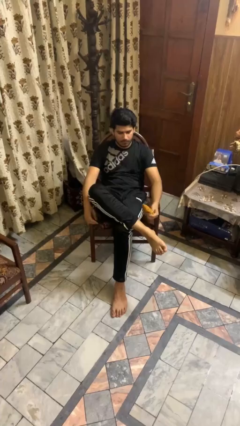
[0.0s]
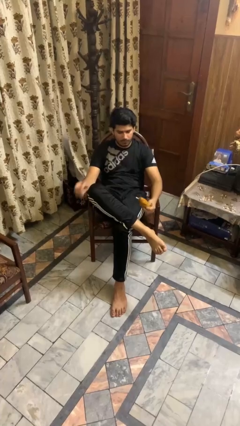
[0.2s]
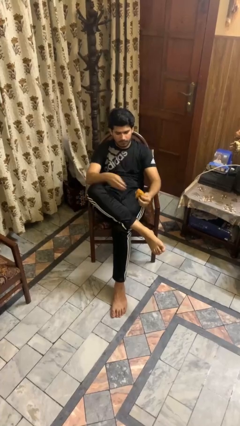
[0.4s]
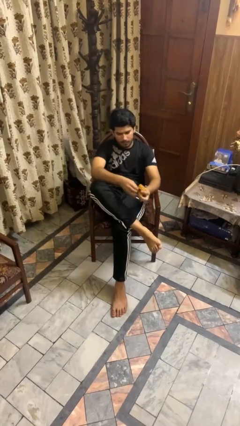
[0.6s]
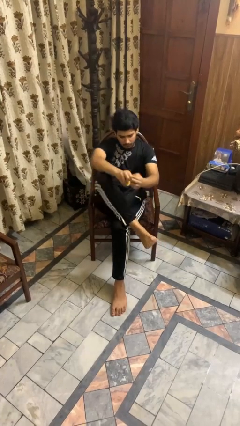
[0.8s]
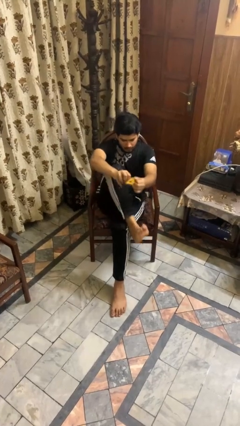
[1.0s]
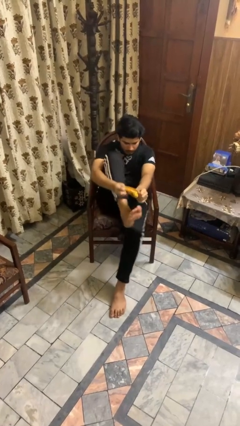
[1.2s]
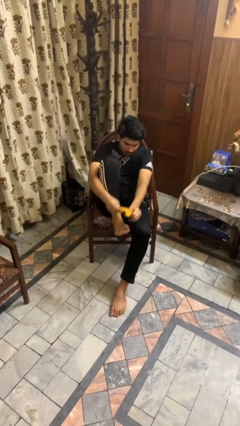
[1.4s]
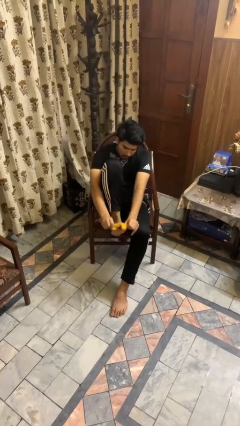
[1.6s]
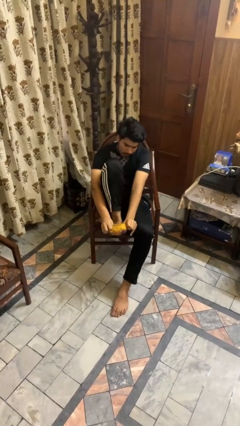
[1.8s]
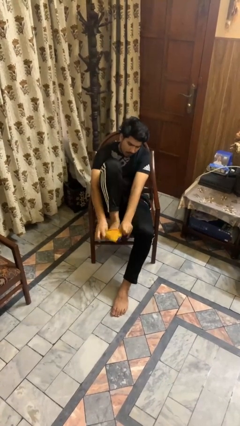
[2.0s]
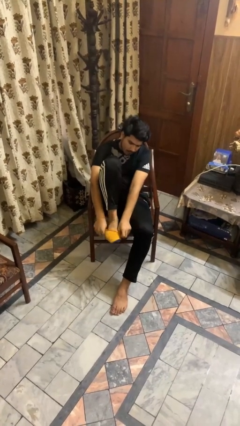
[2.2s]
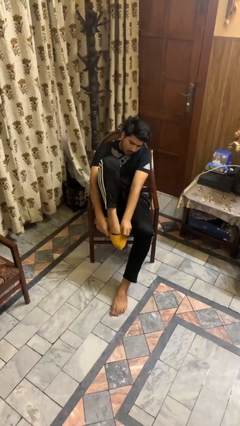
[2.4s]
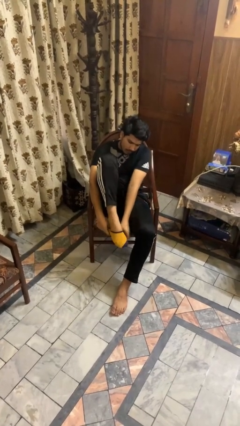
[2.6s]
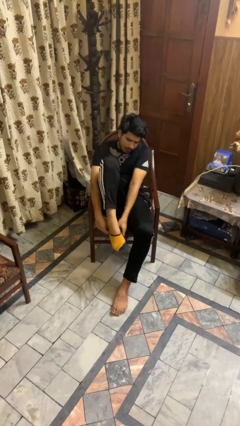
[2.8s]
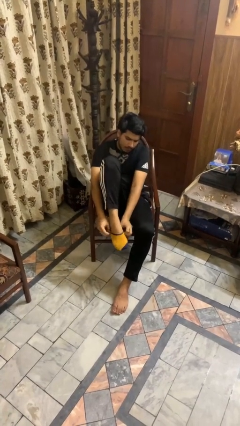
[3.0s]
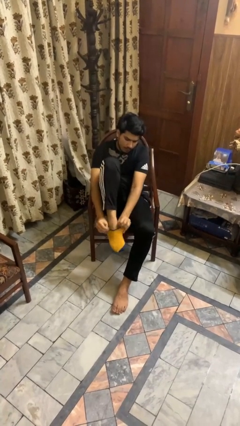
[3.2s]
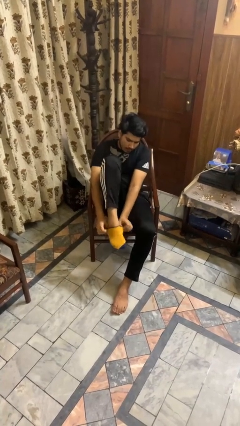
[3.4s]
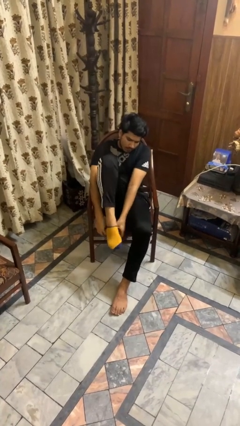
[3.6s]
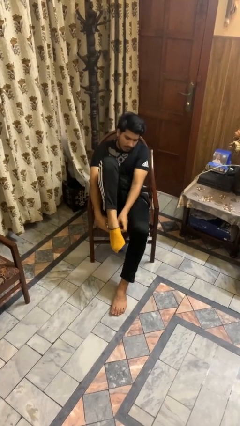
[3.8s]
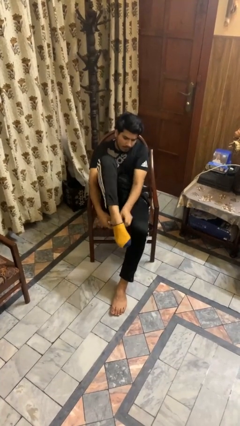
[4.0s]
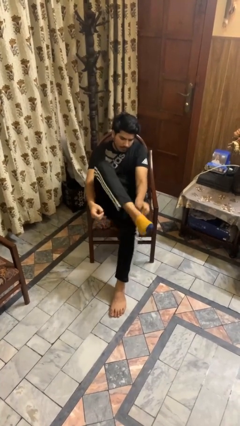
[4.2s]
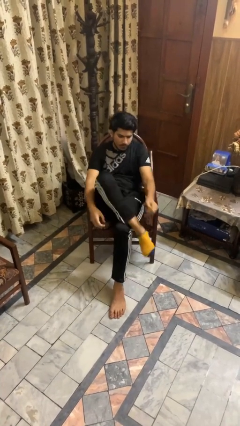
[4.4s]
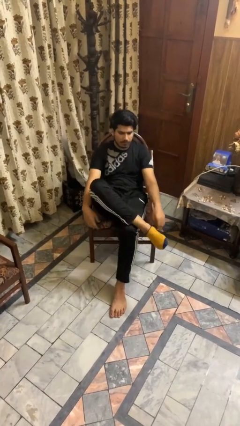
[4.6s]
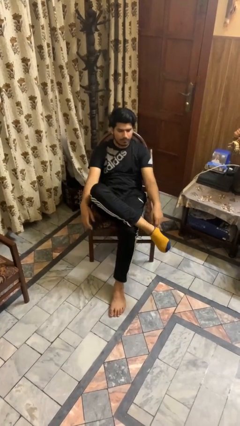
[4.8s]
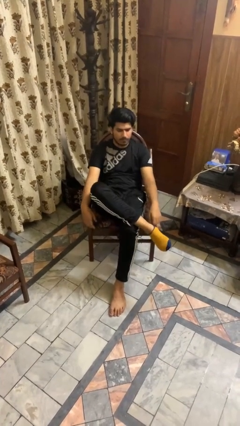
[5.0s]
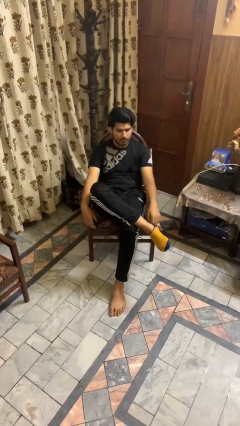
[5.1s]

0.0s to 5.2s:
person puts on socks

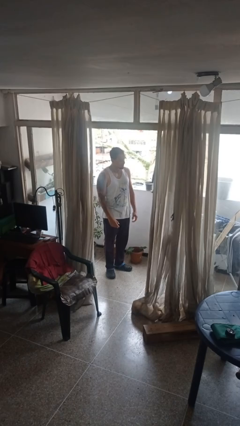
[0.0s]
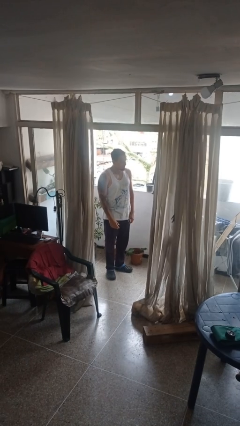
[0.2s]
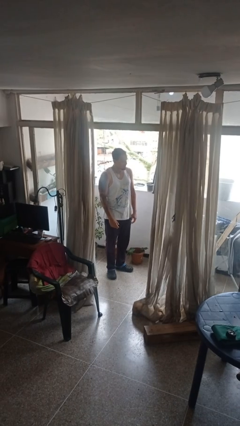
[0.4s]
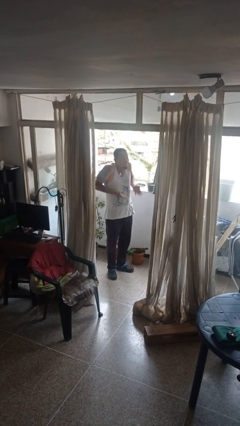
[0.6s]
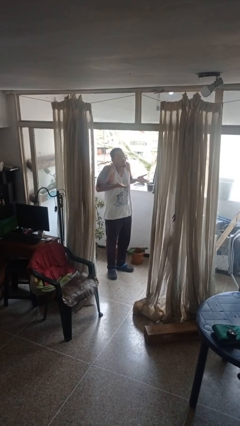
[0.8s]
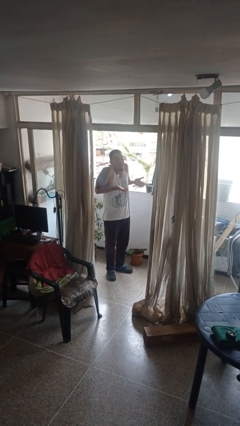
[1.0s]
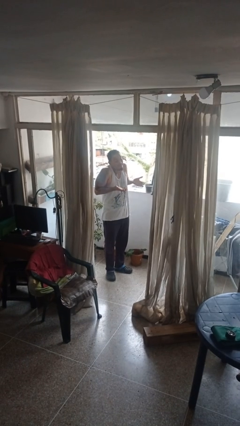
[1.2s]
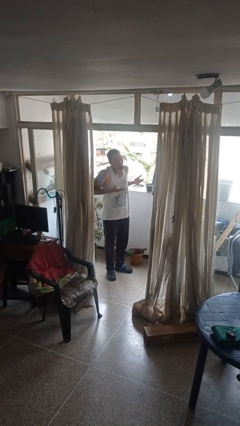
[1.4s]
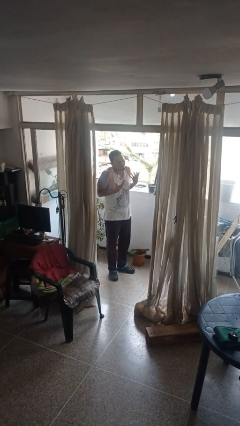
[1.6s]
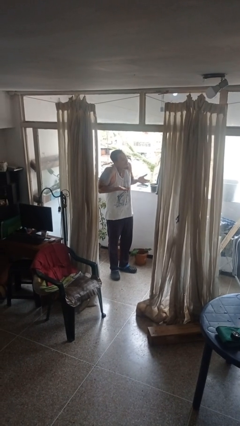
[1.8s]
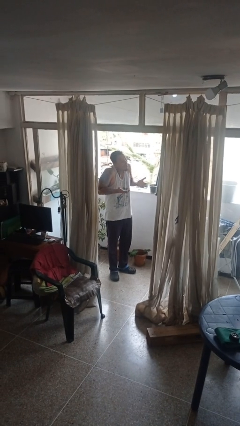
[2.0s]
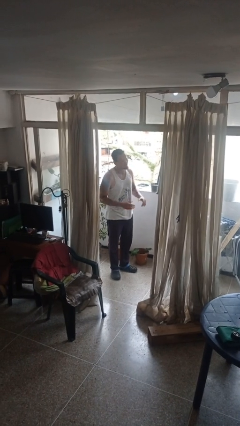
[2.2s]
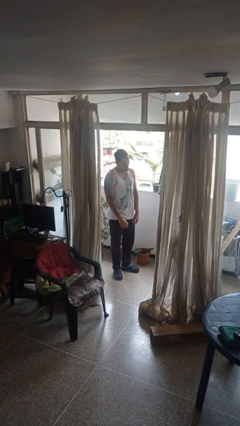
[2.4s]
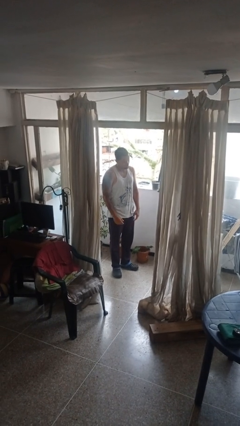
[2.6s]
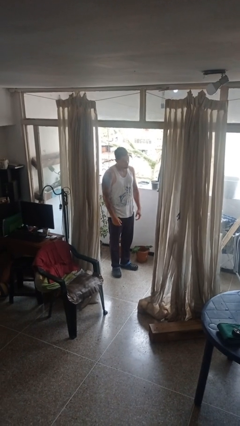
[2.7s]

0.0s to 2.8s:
person shrugs

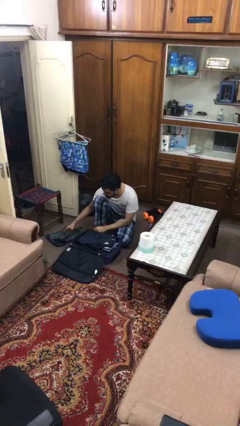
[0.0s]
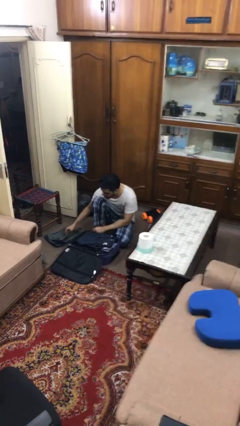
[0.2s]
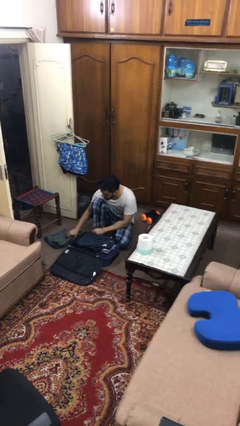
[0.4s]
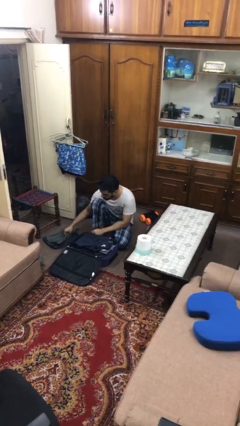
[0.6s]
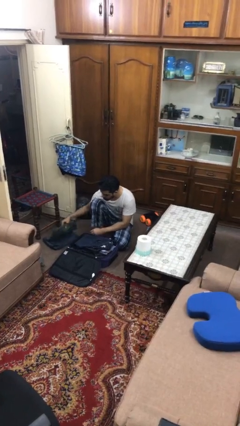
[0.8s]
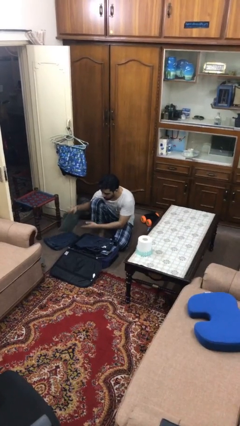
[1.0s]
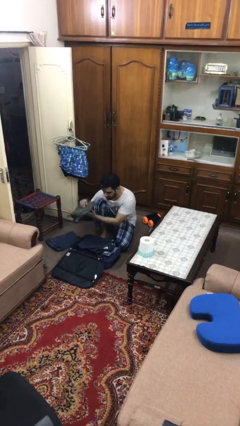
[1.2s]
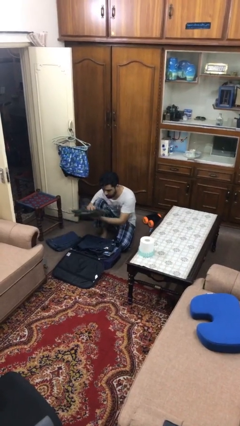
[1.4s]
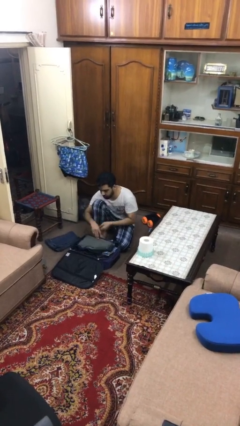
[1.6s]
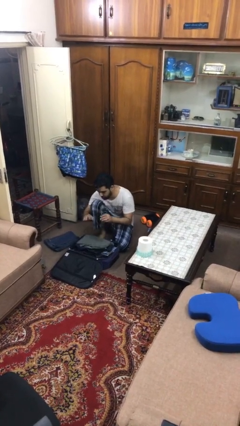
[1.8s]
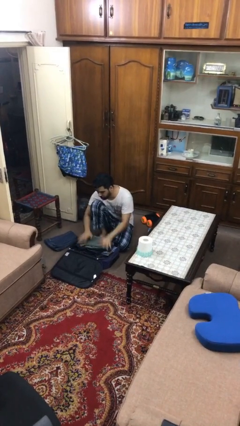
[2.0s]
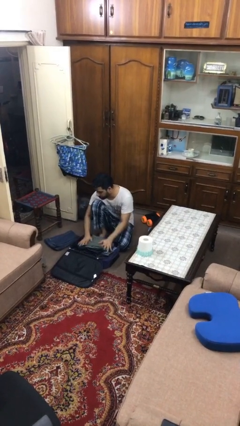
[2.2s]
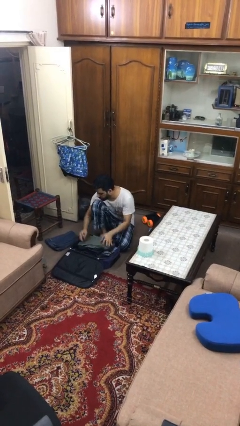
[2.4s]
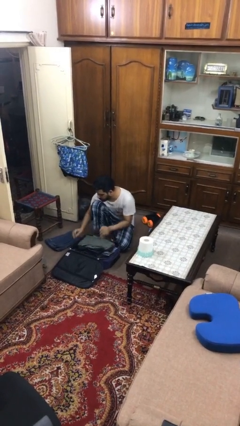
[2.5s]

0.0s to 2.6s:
person loads clothes into suitcase

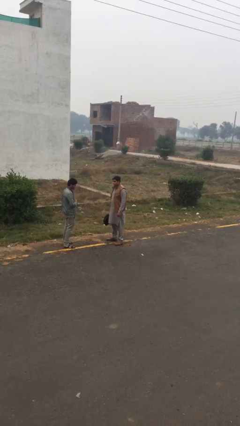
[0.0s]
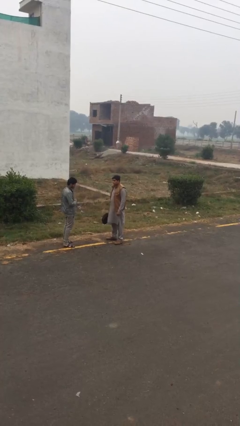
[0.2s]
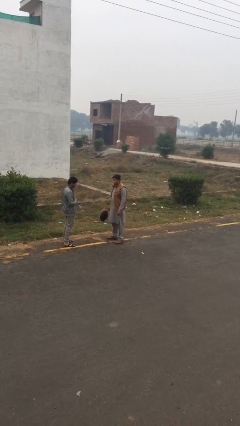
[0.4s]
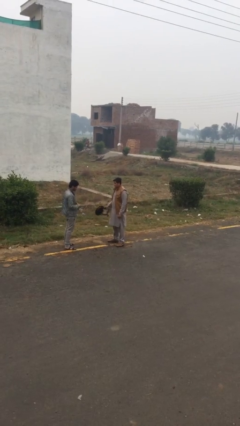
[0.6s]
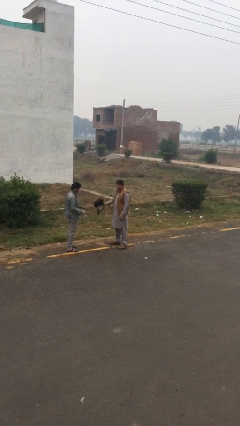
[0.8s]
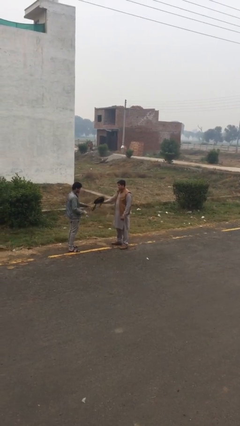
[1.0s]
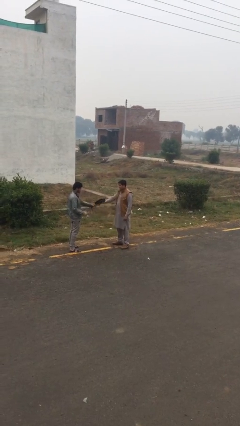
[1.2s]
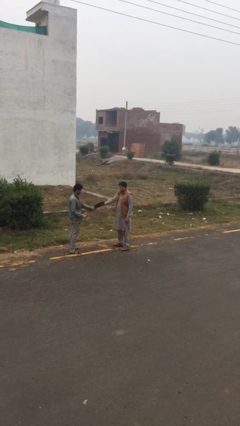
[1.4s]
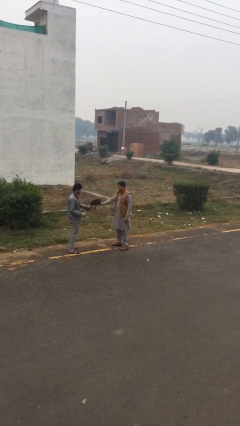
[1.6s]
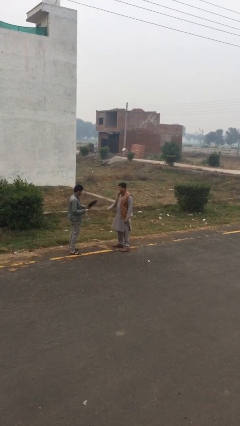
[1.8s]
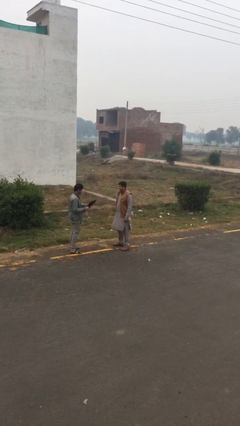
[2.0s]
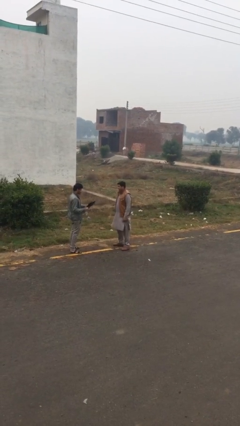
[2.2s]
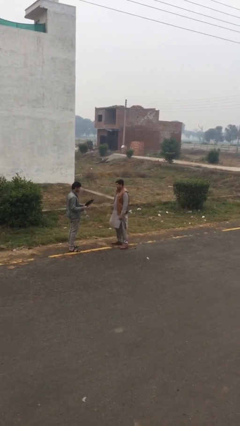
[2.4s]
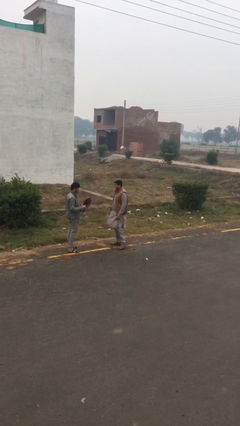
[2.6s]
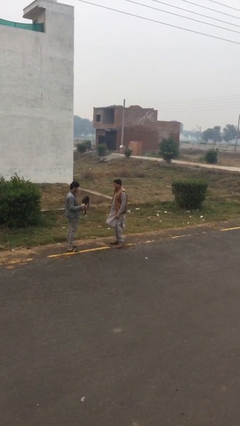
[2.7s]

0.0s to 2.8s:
person transfers object to person

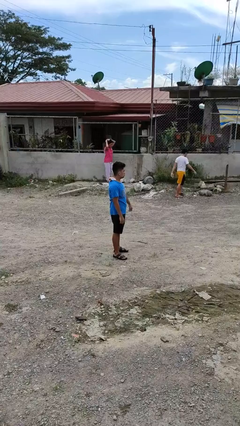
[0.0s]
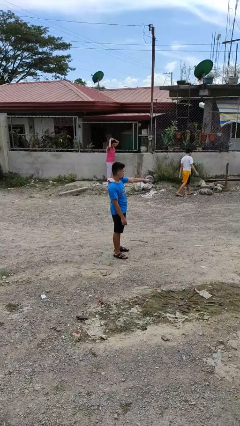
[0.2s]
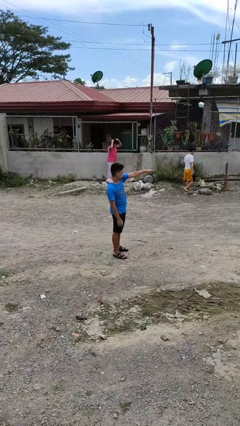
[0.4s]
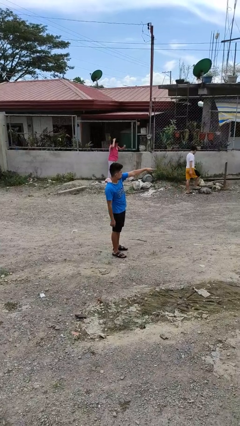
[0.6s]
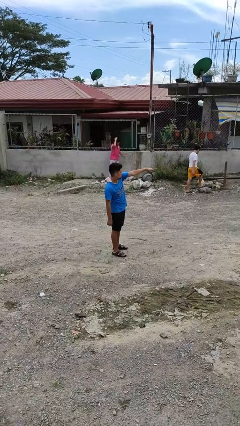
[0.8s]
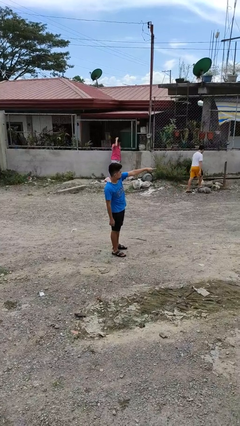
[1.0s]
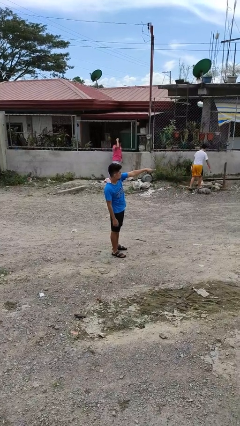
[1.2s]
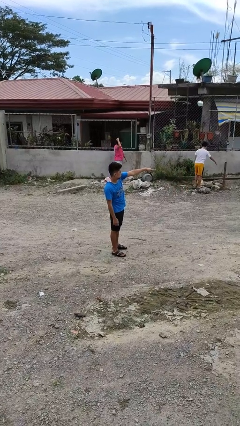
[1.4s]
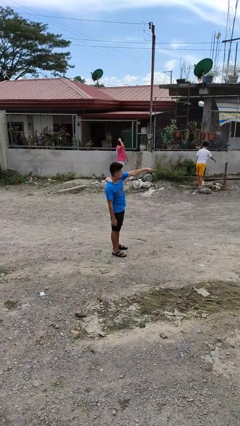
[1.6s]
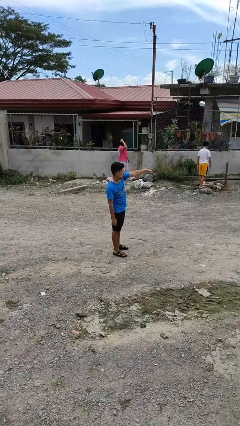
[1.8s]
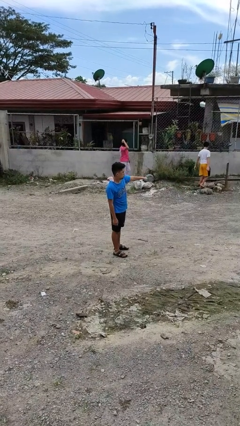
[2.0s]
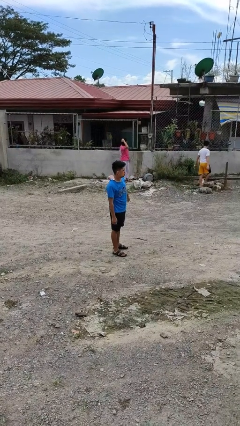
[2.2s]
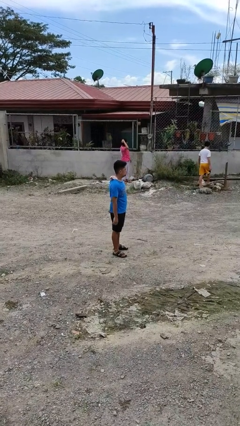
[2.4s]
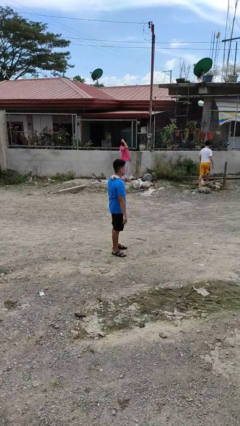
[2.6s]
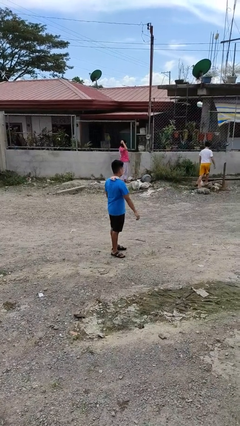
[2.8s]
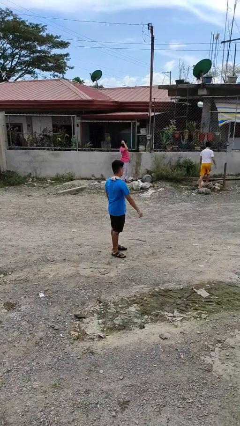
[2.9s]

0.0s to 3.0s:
person points at person

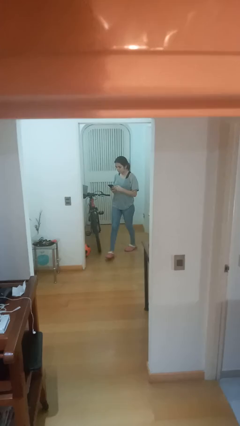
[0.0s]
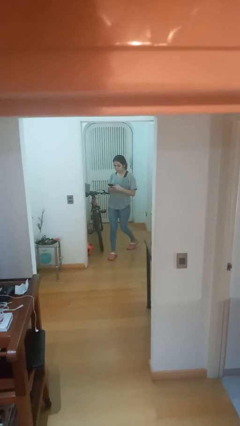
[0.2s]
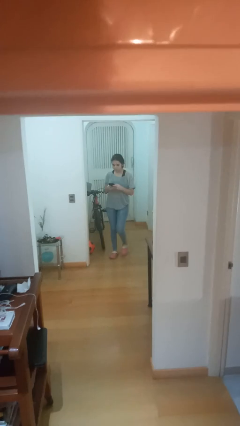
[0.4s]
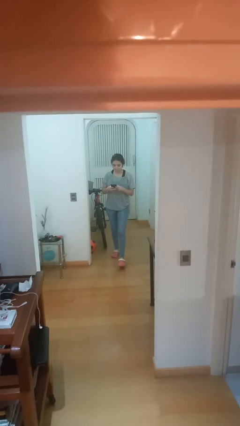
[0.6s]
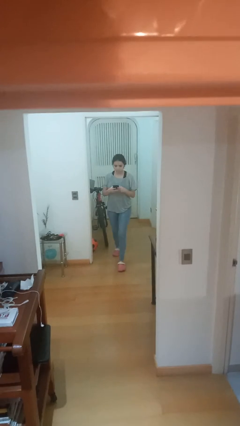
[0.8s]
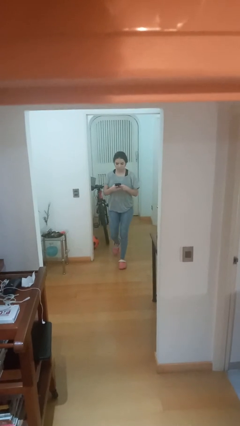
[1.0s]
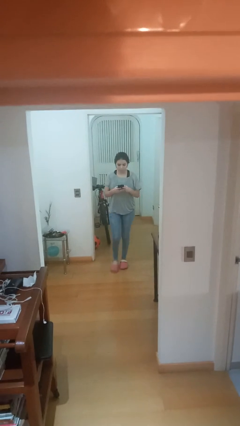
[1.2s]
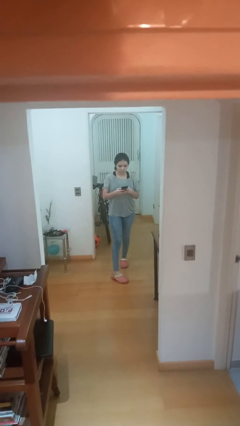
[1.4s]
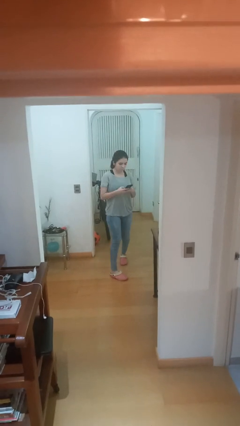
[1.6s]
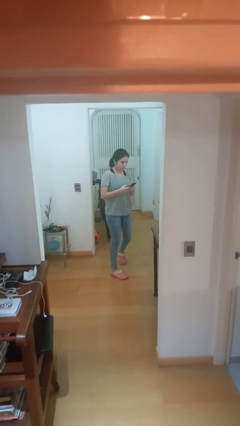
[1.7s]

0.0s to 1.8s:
person enters scene through structure
